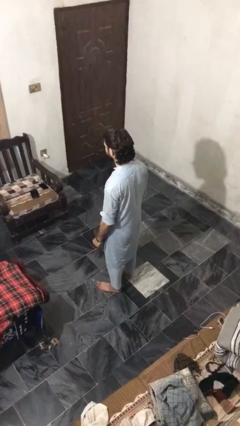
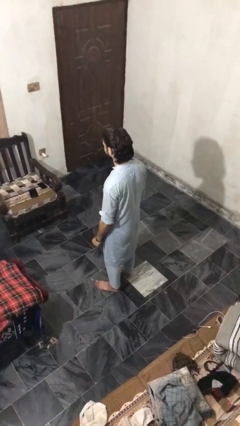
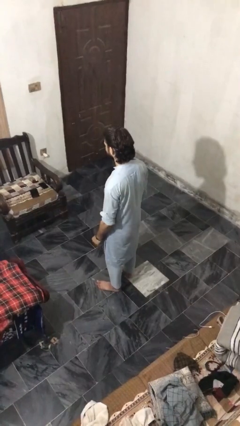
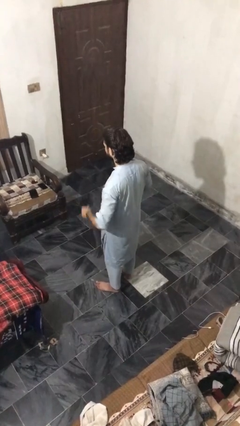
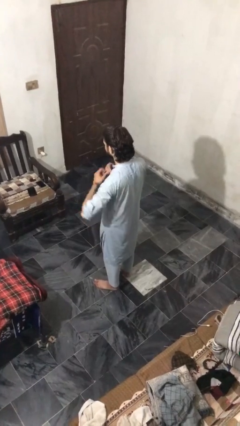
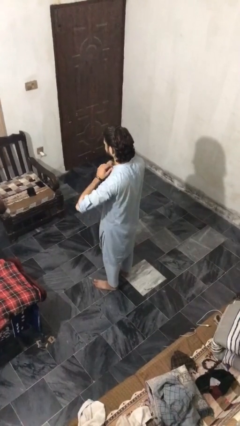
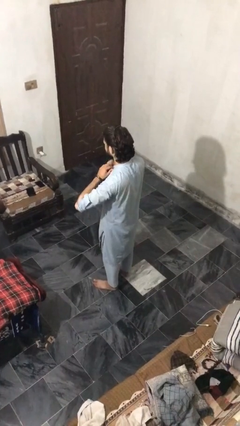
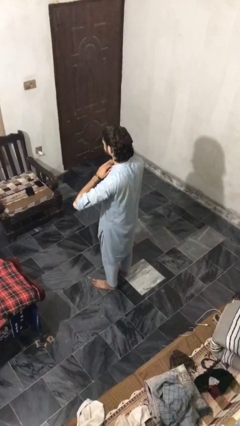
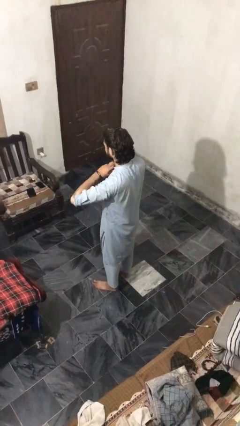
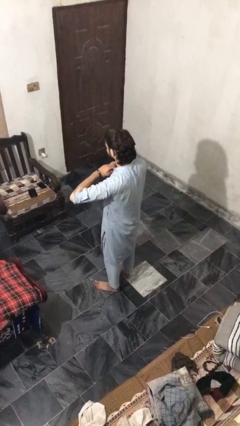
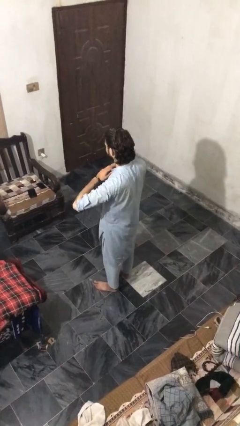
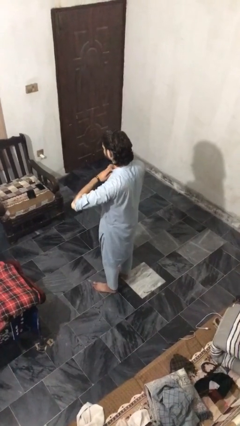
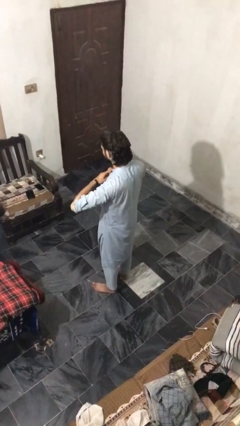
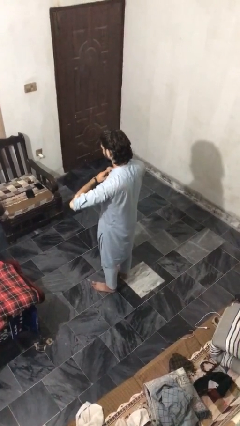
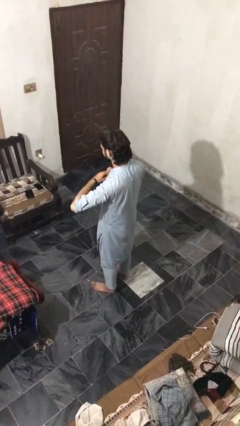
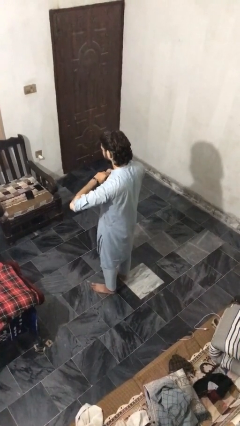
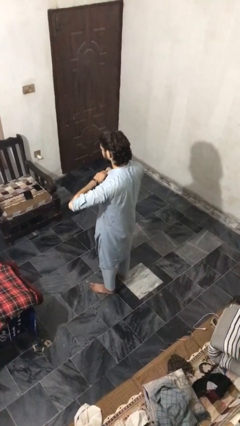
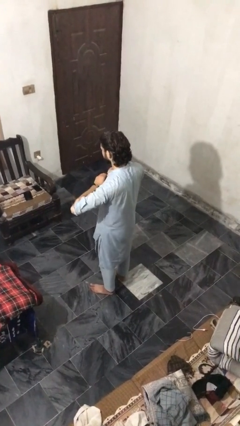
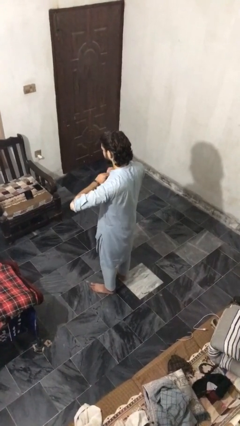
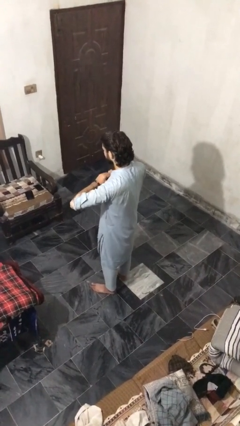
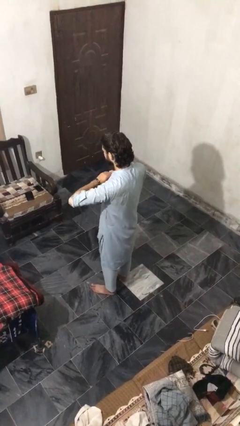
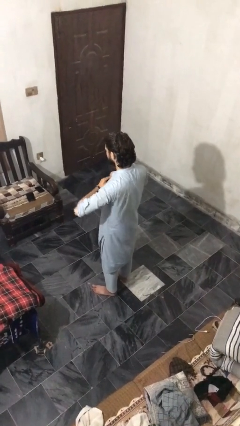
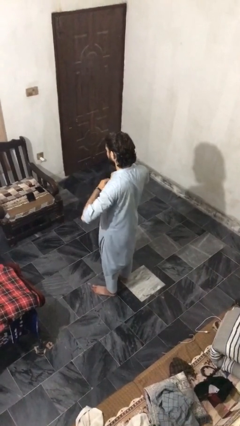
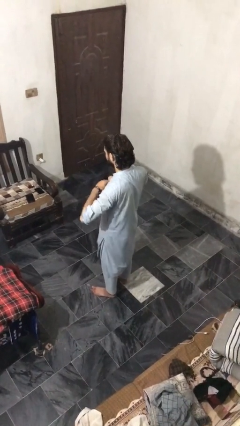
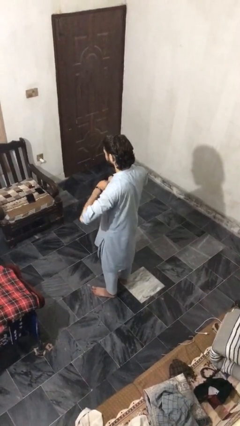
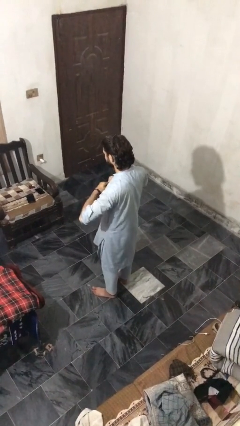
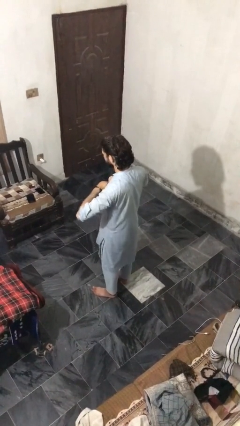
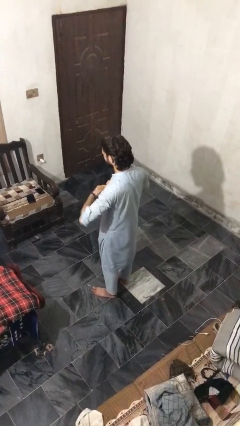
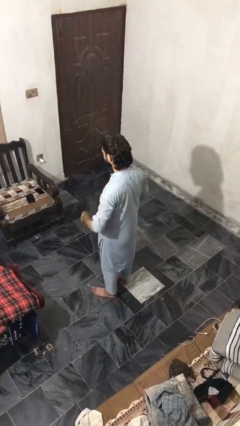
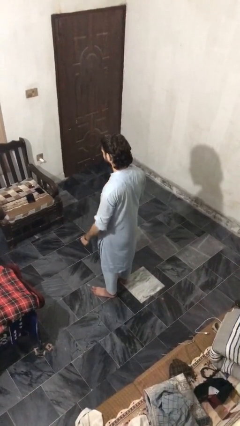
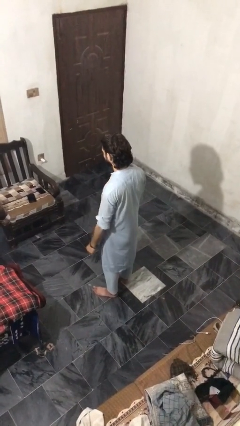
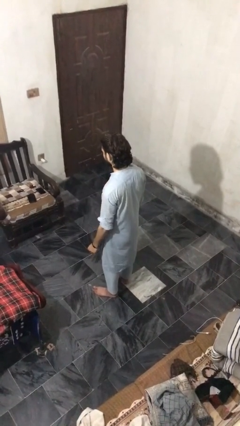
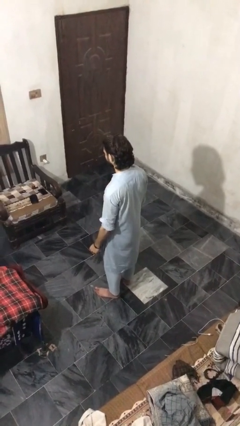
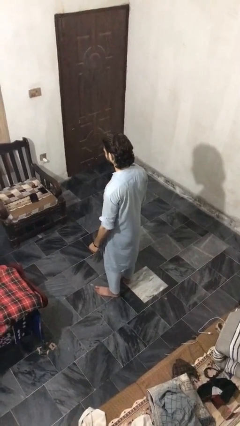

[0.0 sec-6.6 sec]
person unbuttons shirt

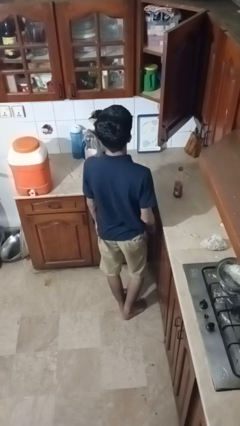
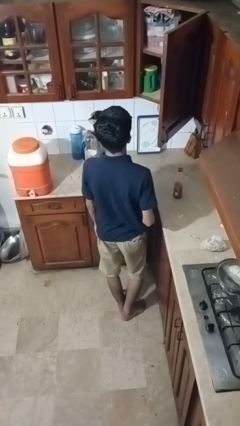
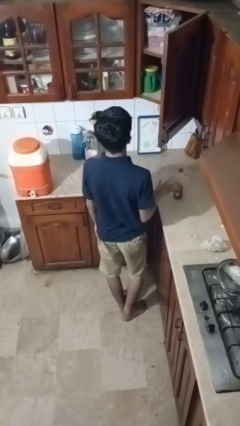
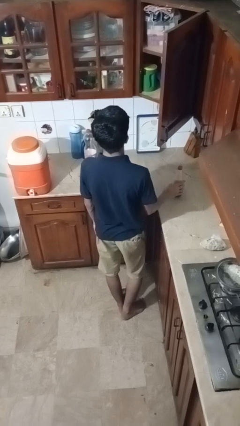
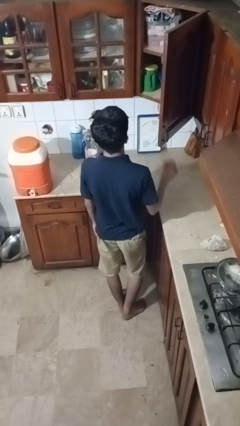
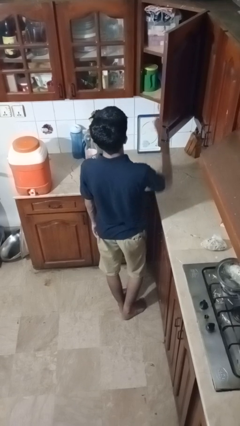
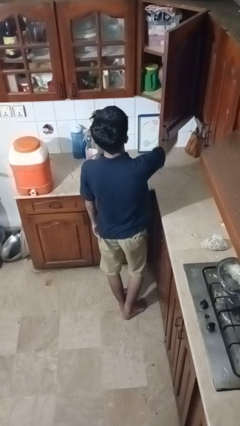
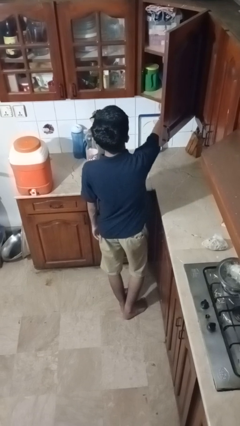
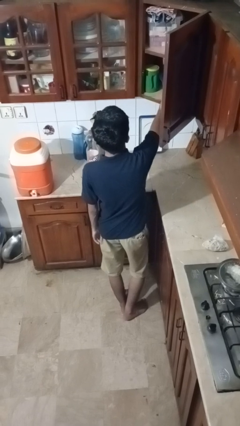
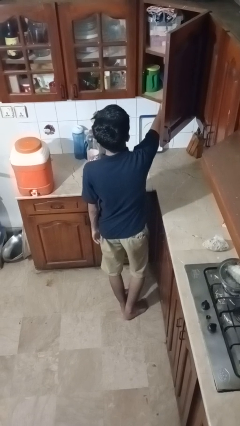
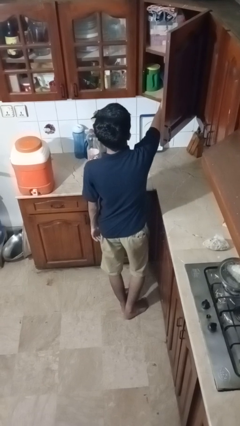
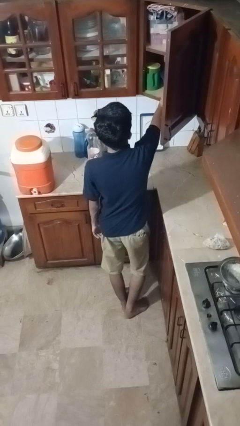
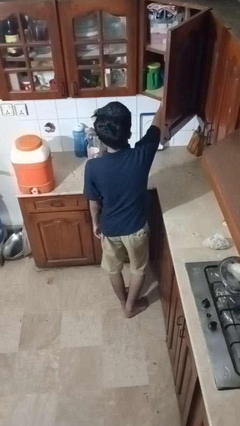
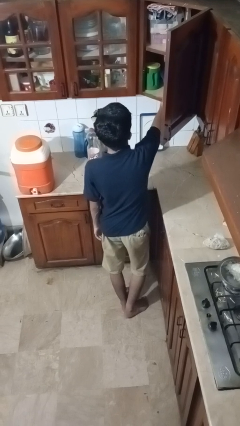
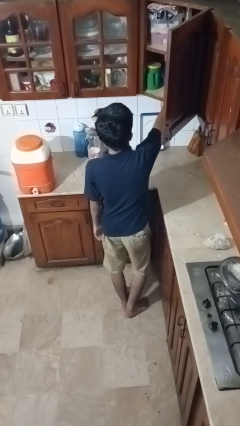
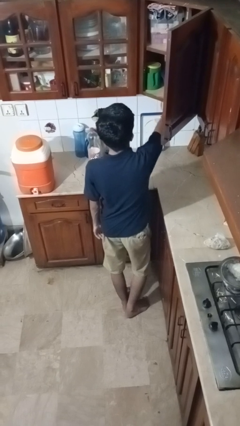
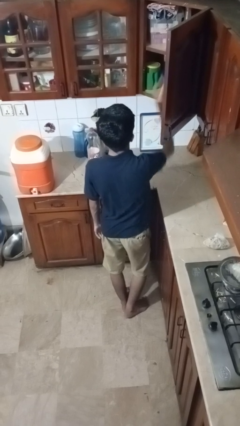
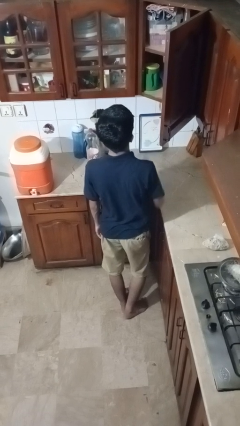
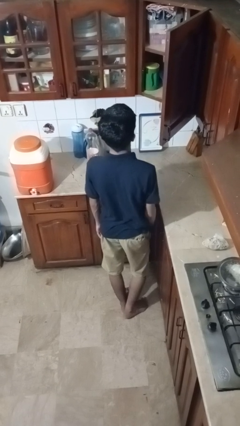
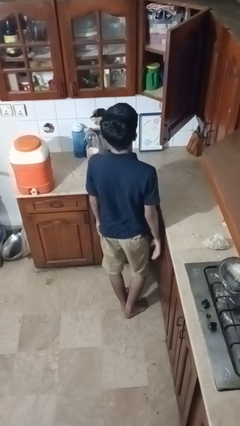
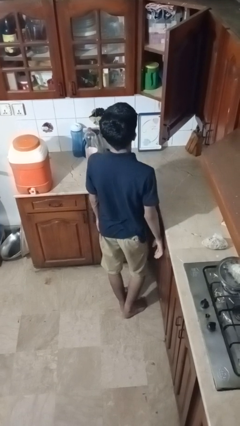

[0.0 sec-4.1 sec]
person puts object in cabinet

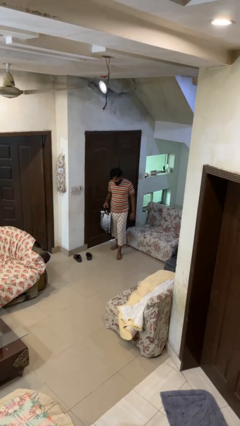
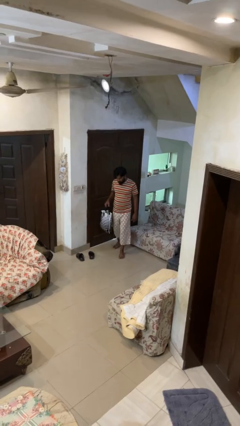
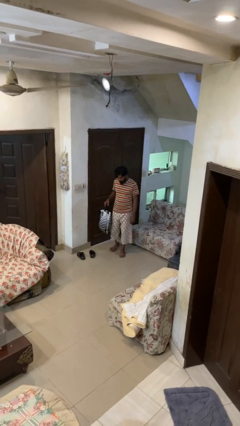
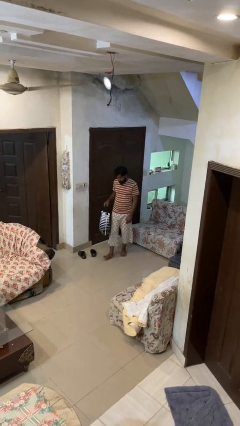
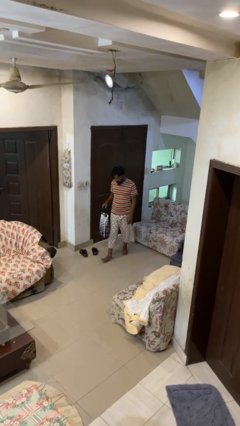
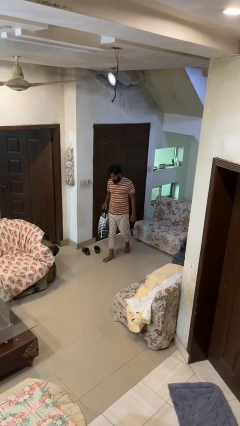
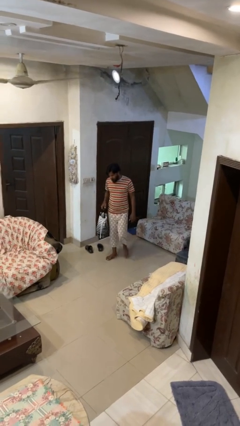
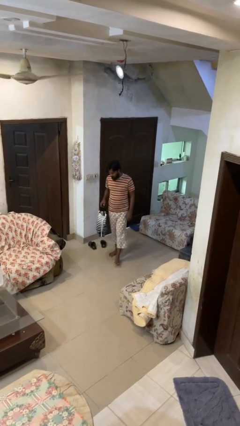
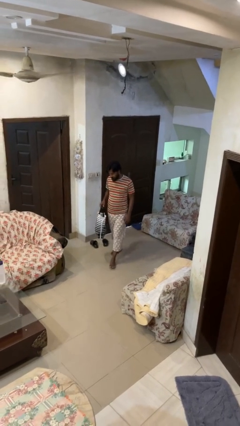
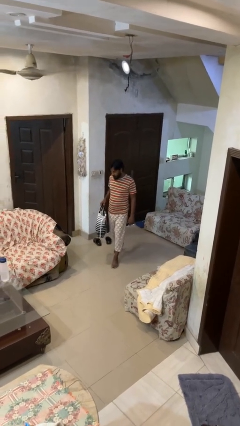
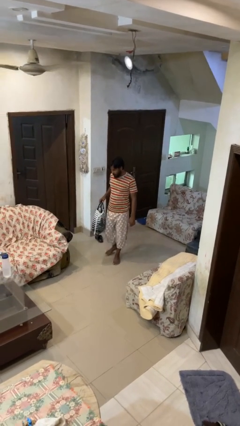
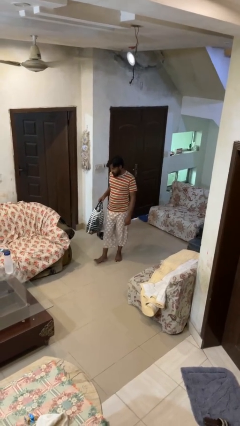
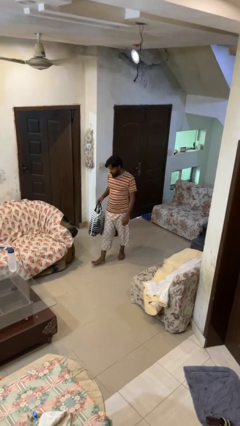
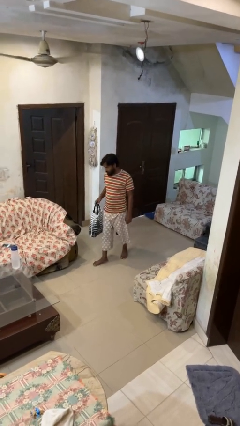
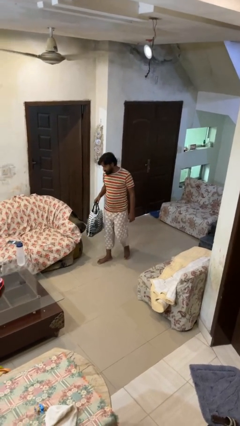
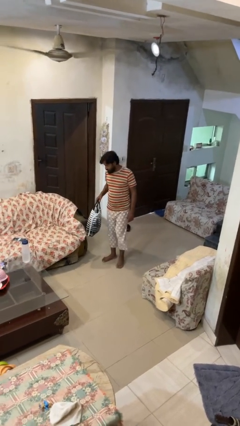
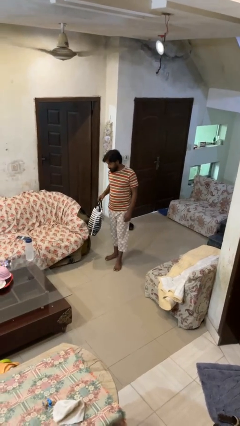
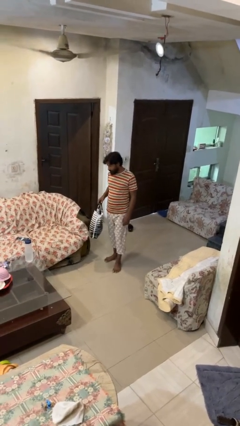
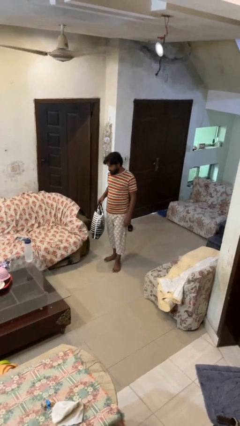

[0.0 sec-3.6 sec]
person carries groceries

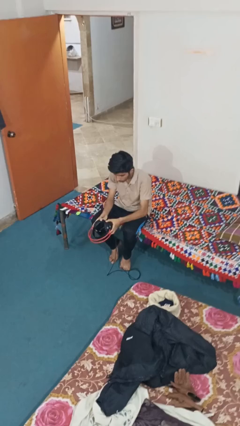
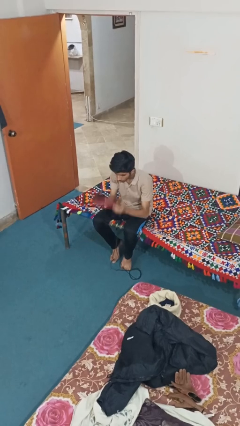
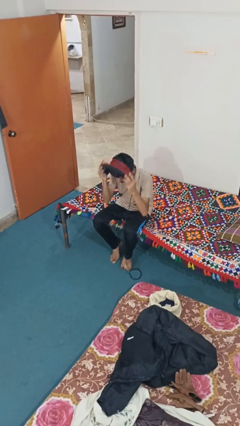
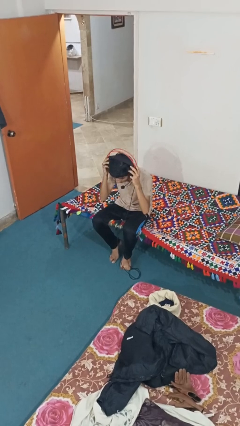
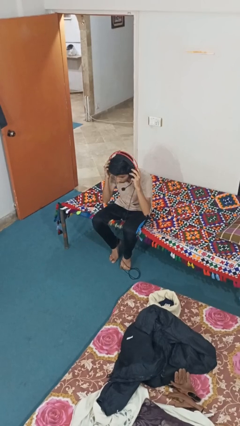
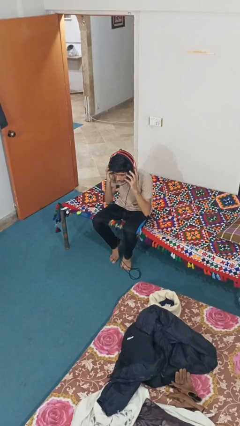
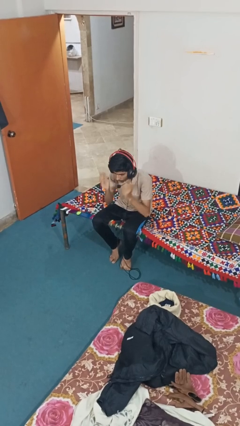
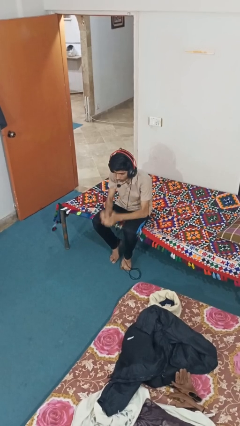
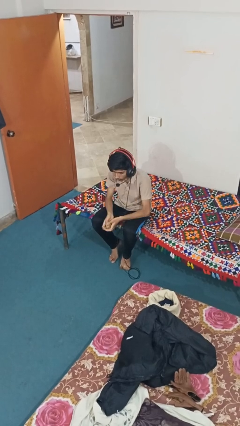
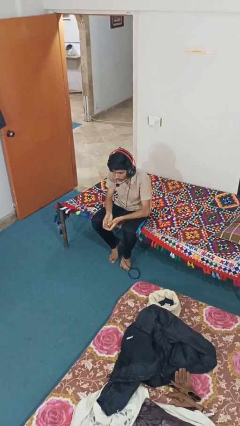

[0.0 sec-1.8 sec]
person puts on headphones

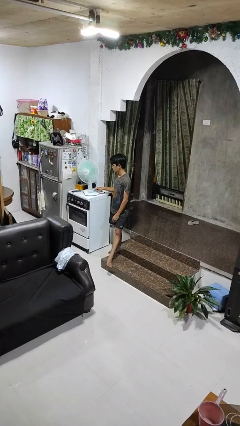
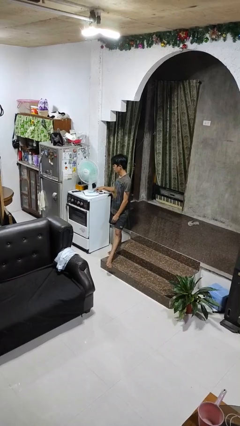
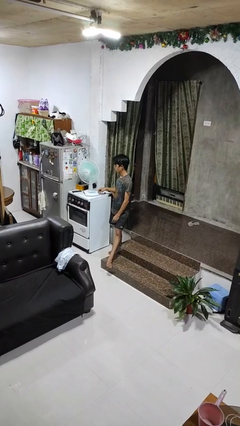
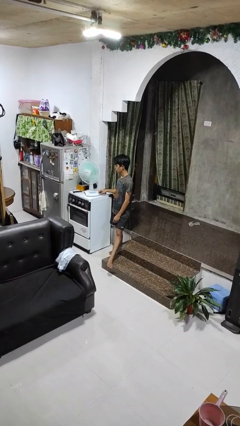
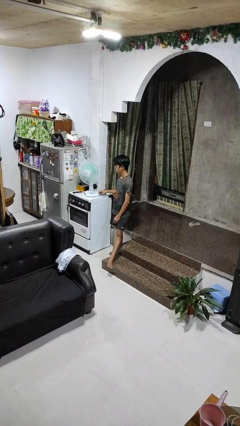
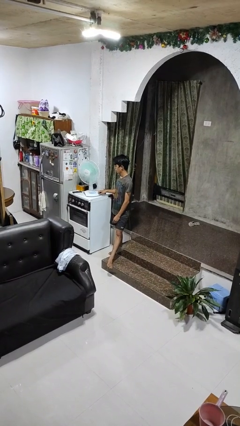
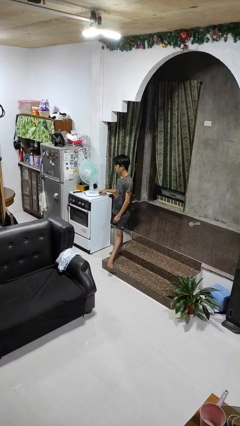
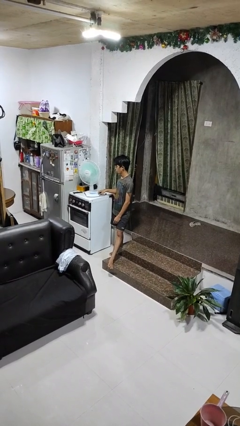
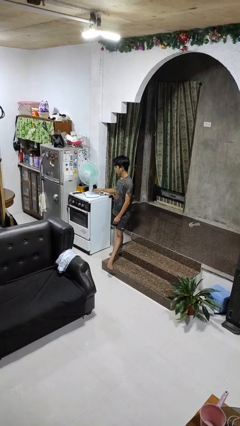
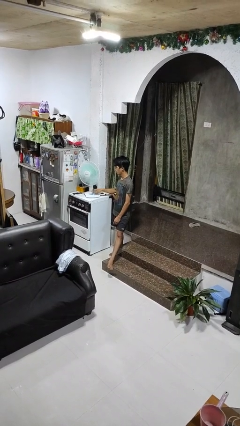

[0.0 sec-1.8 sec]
person turns on fan

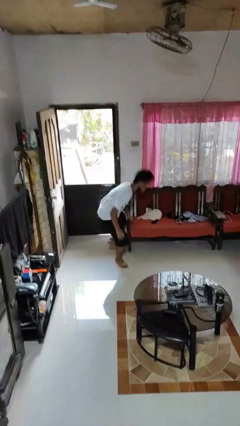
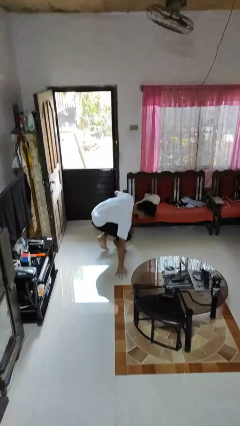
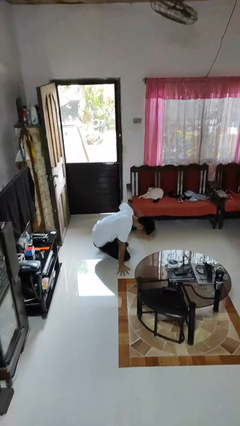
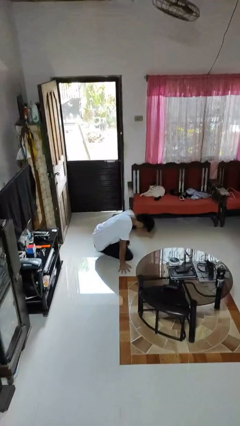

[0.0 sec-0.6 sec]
person trips on object on floor
